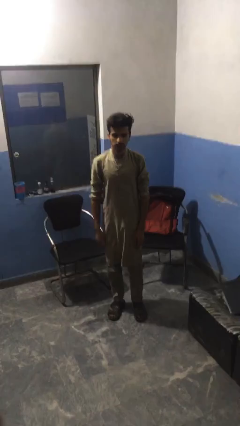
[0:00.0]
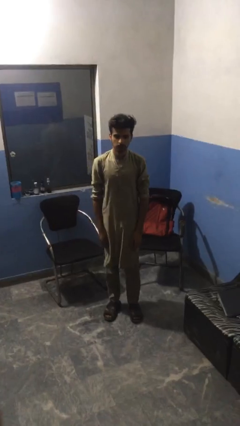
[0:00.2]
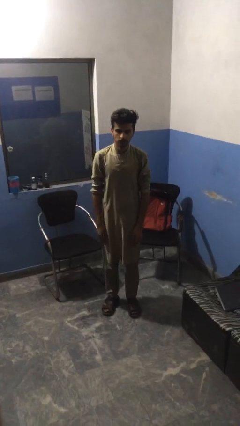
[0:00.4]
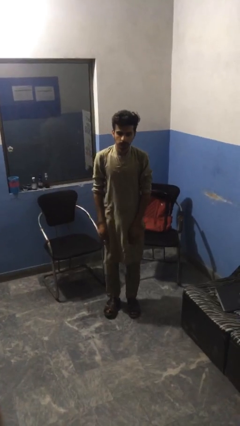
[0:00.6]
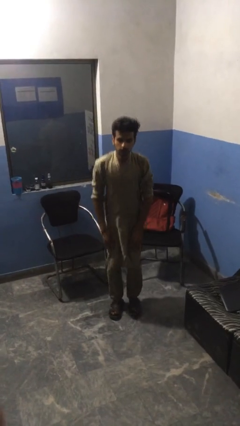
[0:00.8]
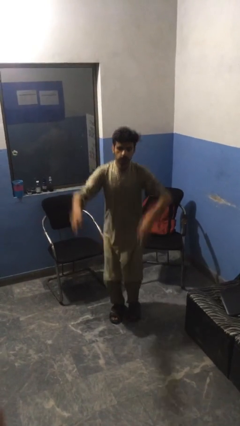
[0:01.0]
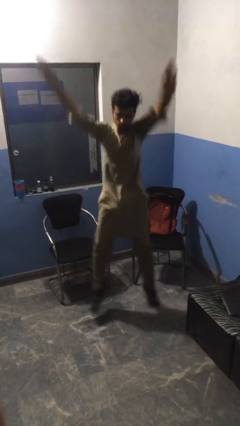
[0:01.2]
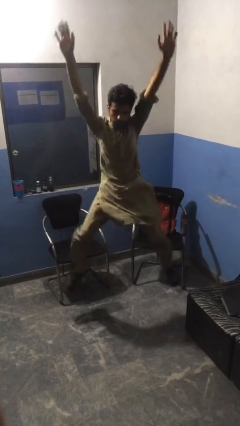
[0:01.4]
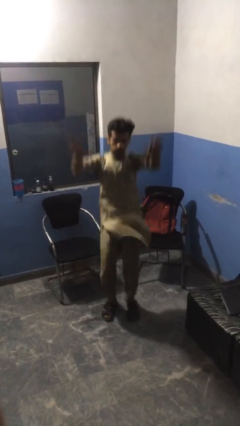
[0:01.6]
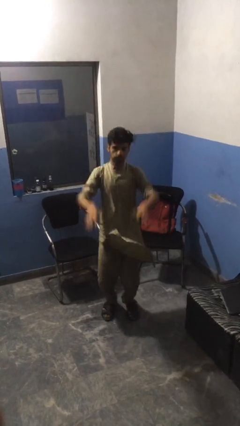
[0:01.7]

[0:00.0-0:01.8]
person exercises with jumping jacks

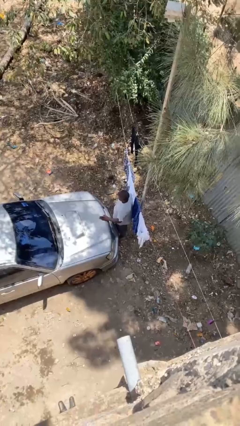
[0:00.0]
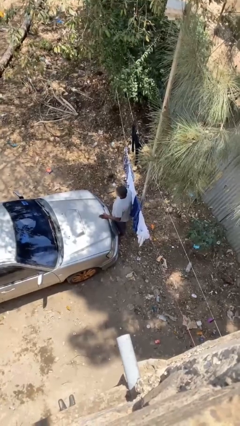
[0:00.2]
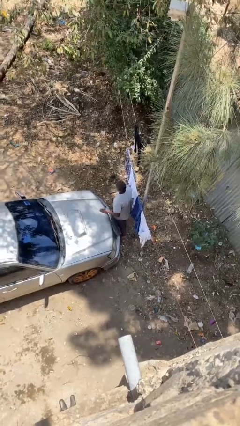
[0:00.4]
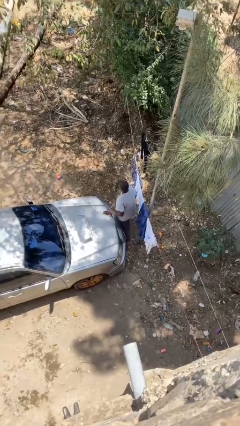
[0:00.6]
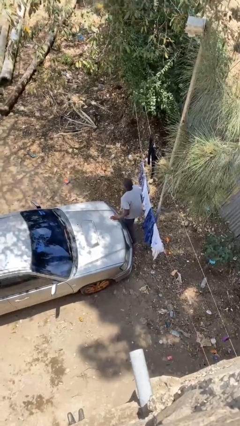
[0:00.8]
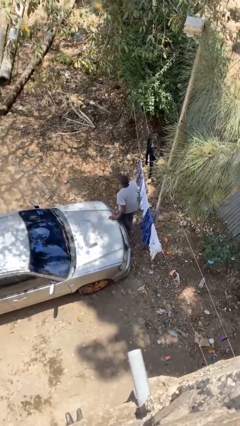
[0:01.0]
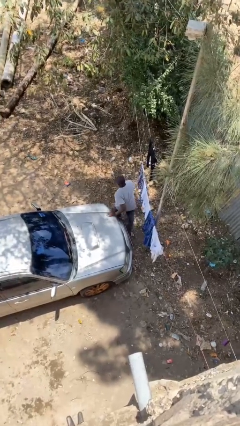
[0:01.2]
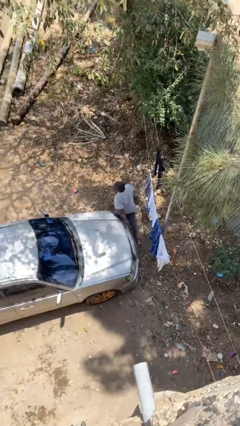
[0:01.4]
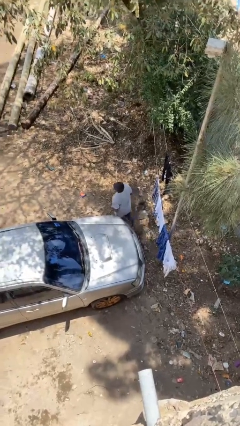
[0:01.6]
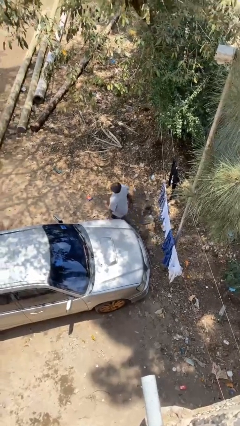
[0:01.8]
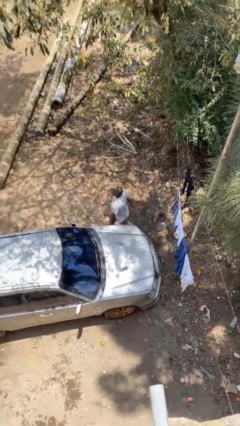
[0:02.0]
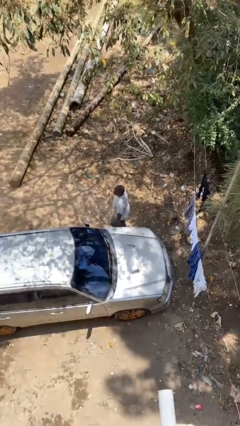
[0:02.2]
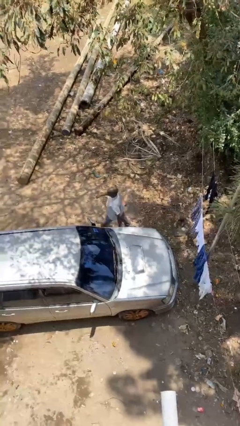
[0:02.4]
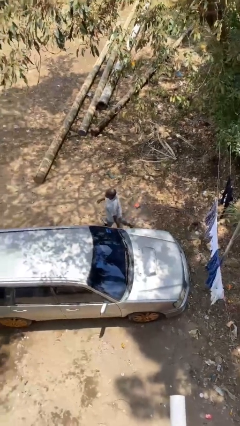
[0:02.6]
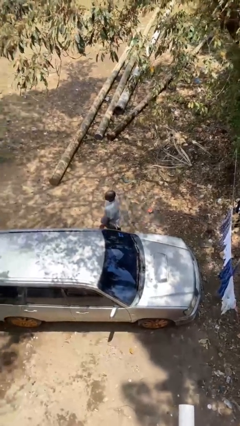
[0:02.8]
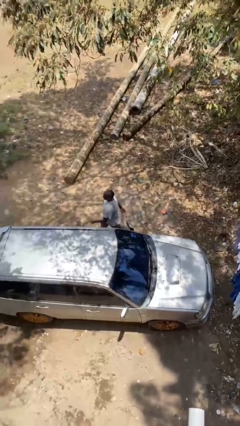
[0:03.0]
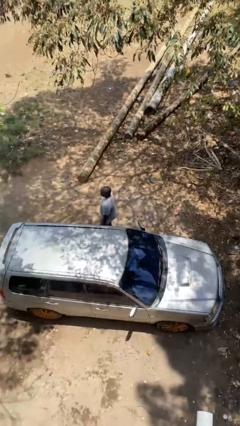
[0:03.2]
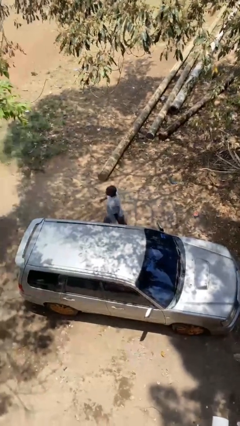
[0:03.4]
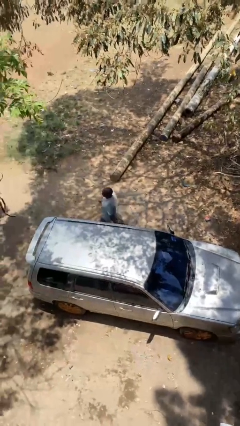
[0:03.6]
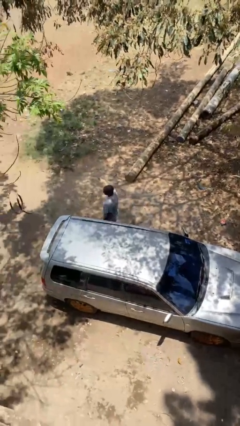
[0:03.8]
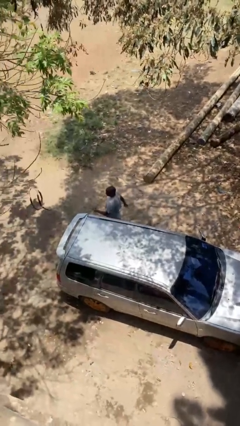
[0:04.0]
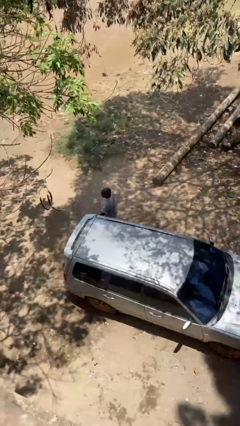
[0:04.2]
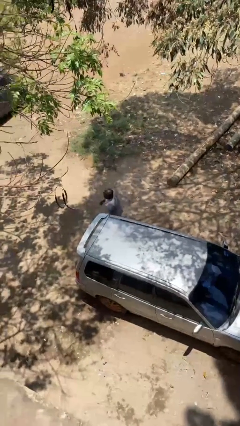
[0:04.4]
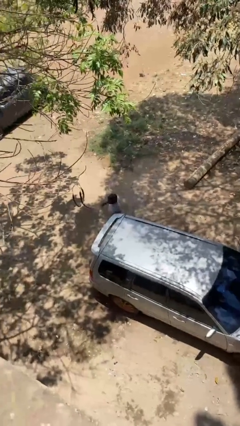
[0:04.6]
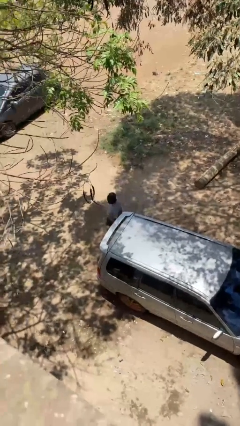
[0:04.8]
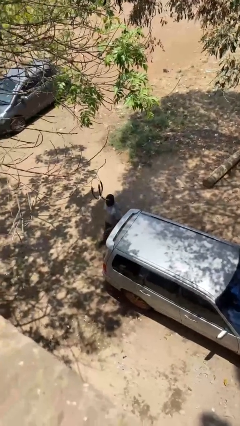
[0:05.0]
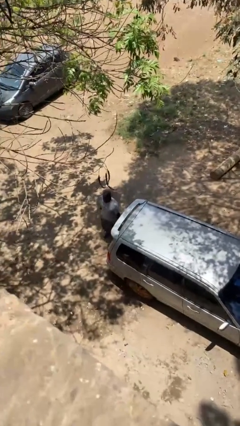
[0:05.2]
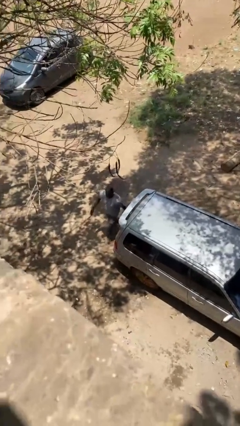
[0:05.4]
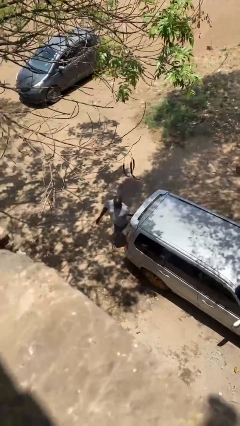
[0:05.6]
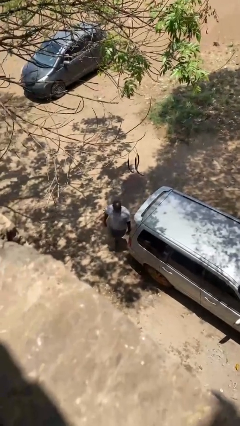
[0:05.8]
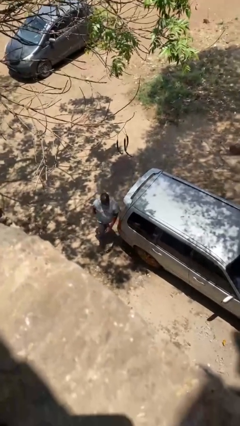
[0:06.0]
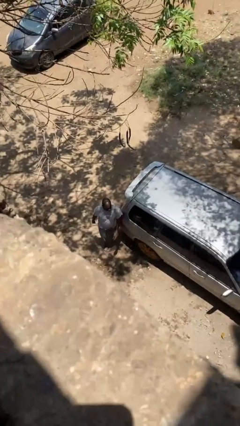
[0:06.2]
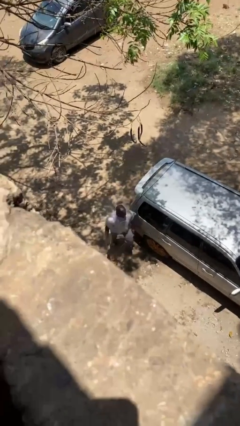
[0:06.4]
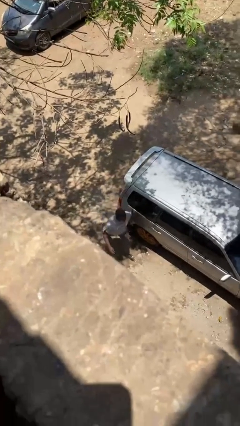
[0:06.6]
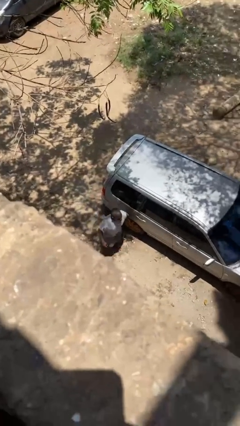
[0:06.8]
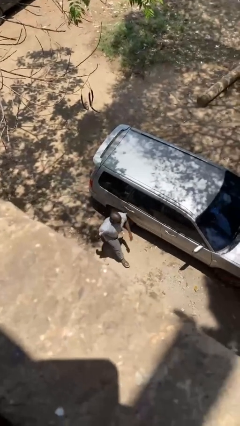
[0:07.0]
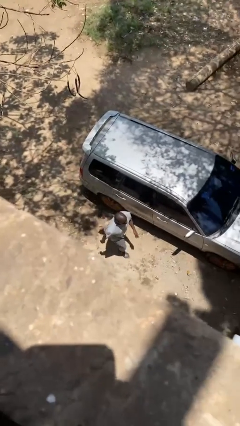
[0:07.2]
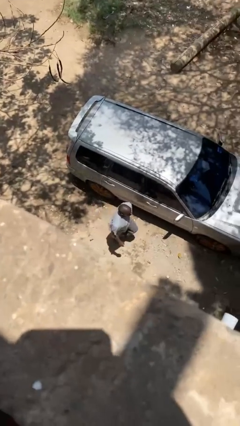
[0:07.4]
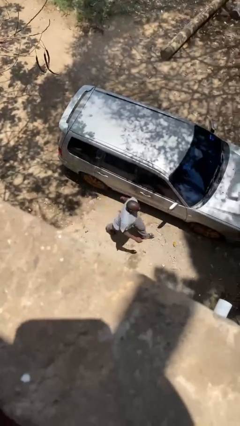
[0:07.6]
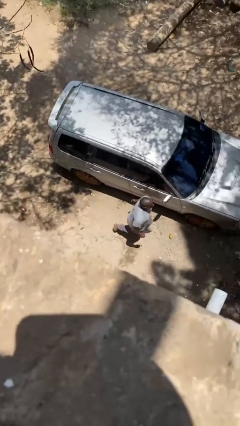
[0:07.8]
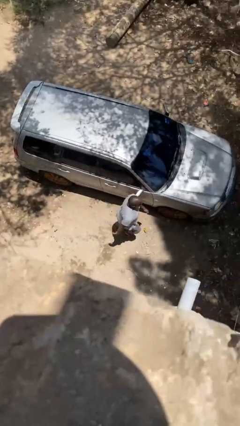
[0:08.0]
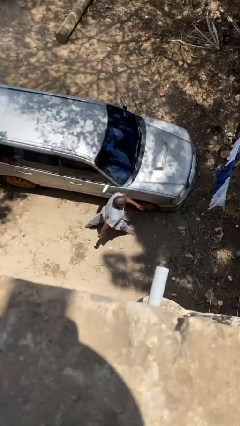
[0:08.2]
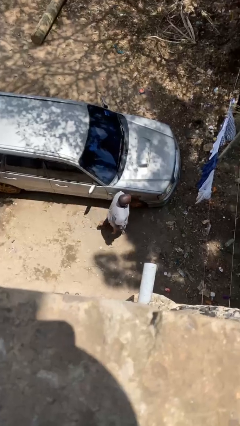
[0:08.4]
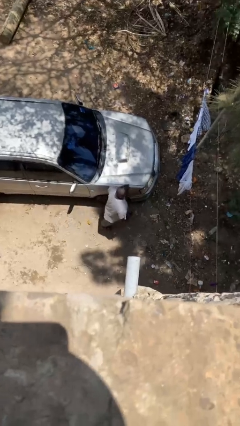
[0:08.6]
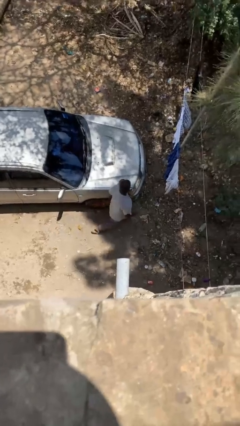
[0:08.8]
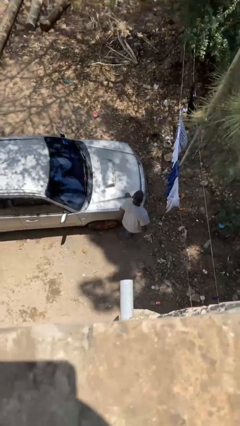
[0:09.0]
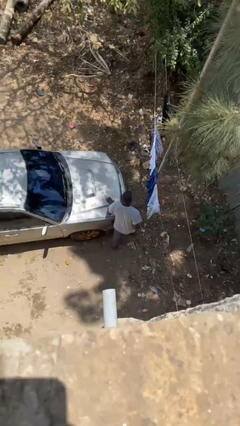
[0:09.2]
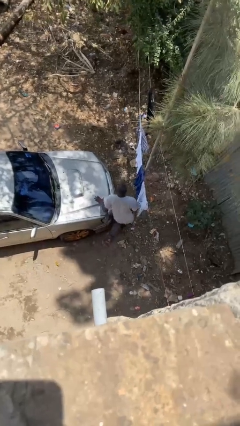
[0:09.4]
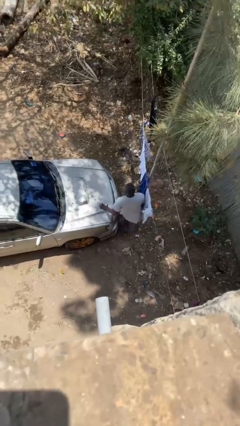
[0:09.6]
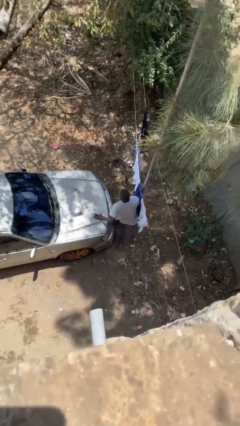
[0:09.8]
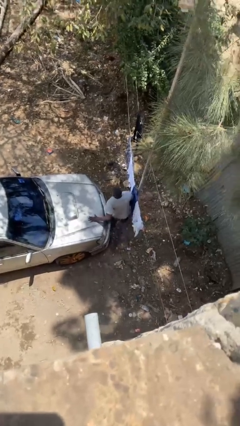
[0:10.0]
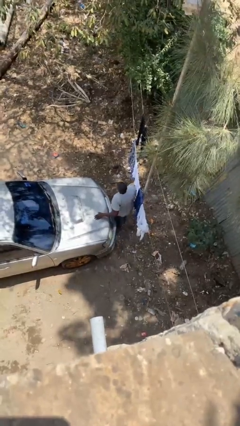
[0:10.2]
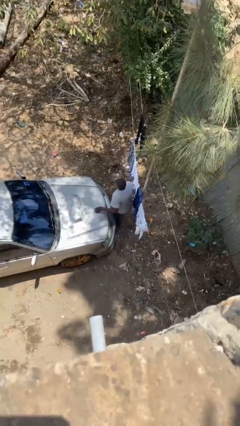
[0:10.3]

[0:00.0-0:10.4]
person walks around car

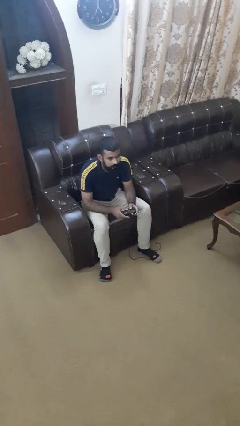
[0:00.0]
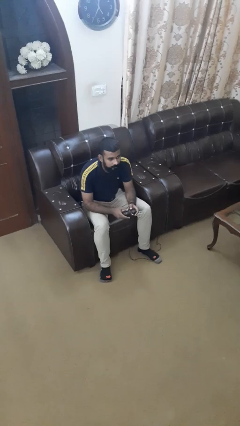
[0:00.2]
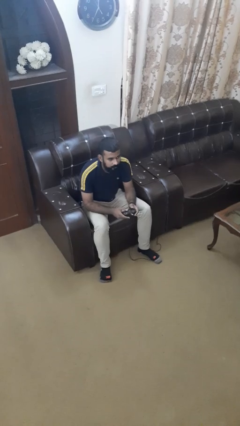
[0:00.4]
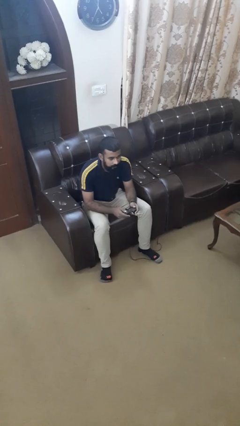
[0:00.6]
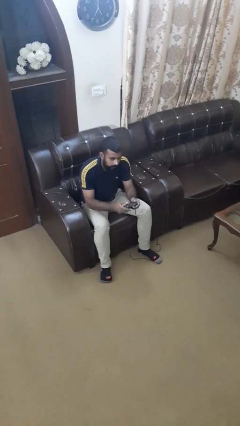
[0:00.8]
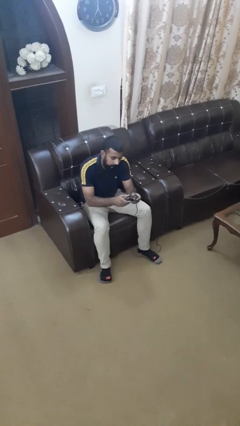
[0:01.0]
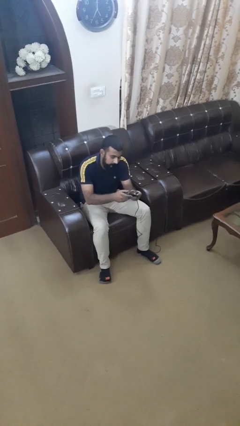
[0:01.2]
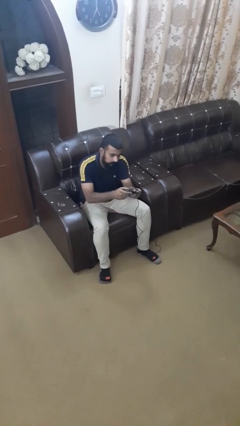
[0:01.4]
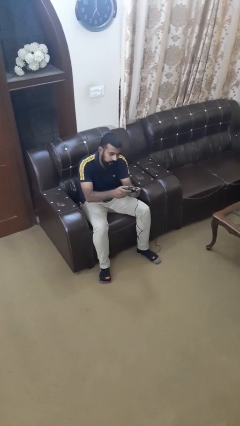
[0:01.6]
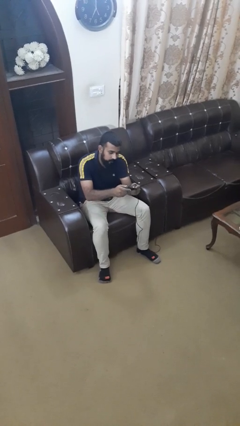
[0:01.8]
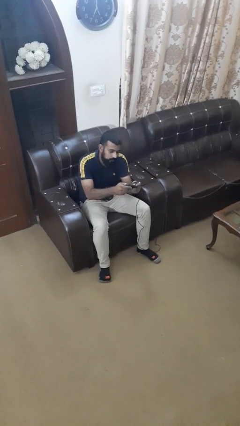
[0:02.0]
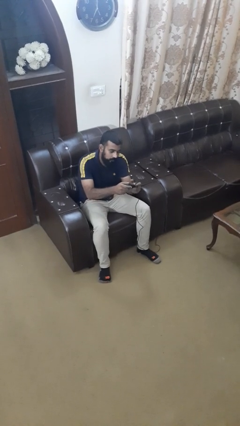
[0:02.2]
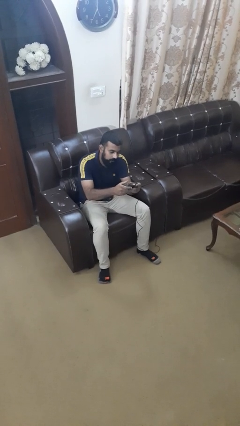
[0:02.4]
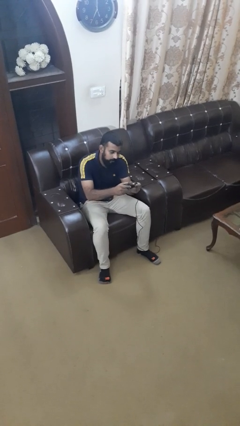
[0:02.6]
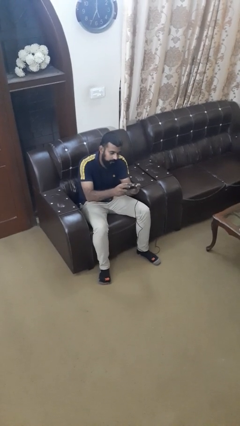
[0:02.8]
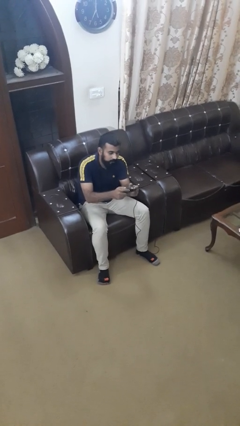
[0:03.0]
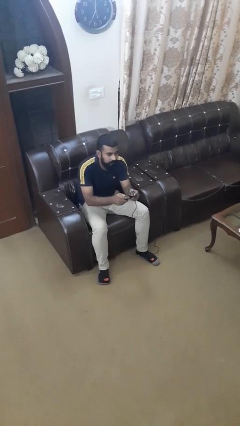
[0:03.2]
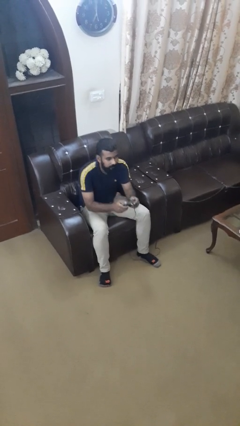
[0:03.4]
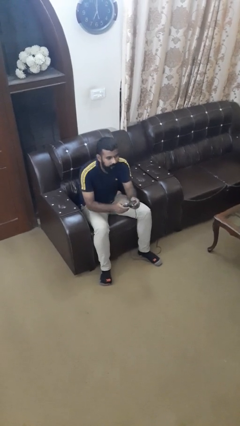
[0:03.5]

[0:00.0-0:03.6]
person interacts with handheld game

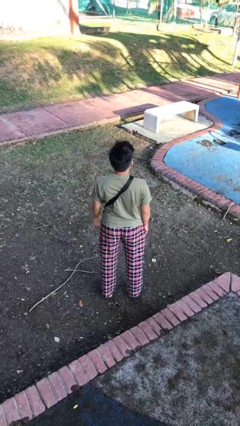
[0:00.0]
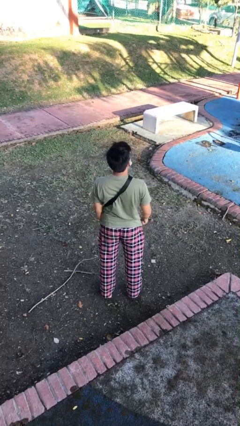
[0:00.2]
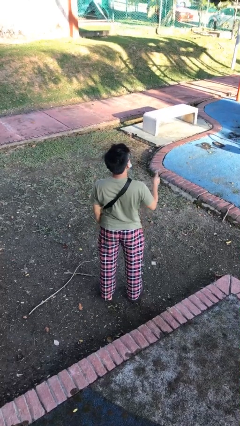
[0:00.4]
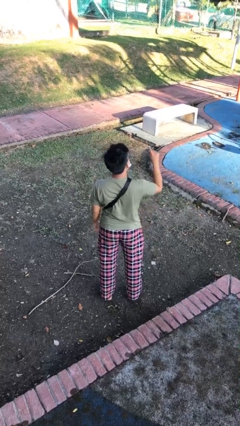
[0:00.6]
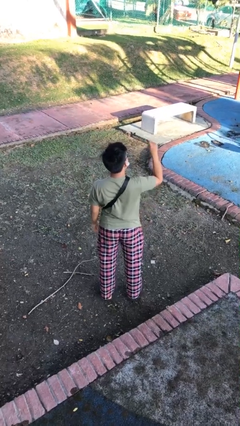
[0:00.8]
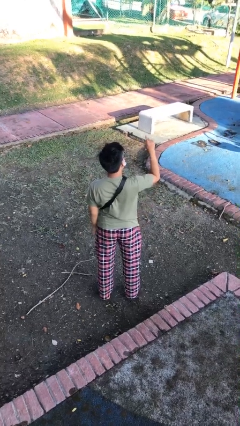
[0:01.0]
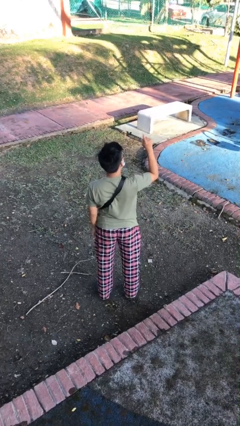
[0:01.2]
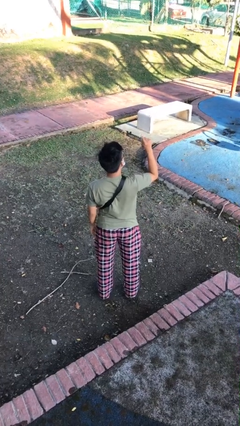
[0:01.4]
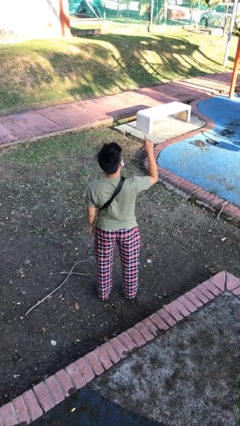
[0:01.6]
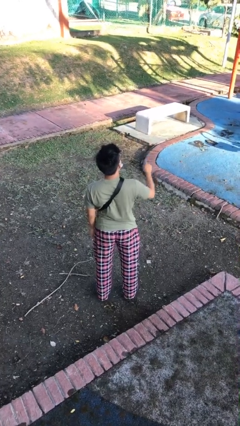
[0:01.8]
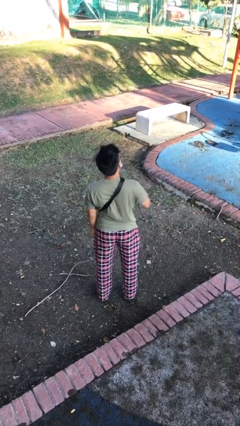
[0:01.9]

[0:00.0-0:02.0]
person gestures number one
